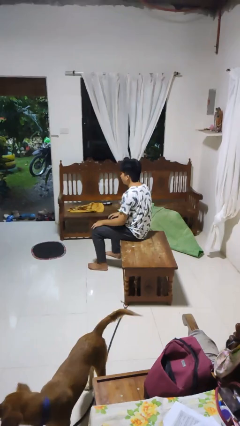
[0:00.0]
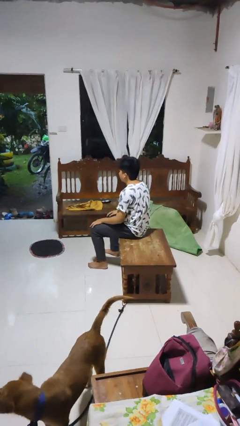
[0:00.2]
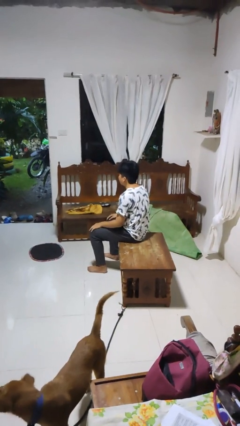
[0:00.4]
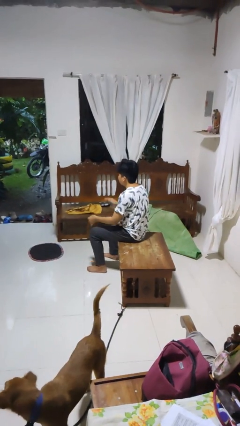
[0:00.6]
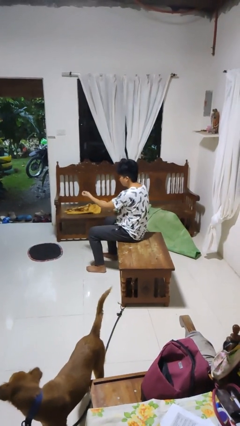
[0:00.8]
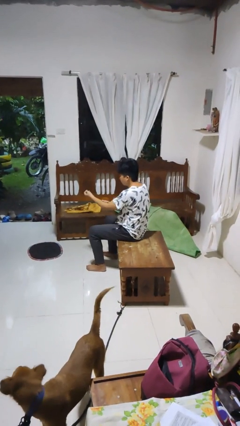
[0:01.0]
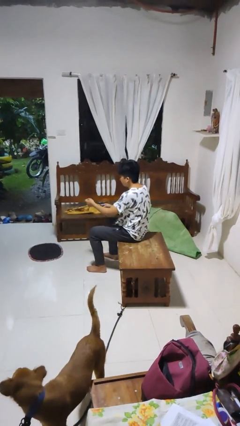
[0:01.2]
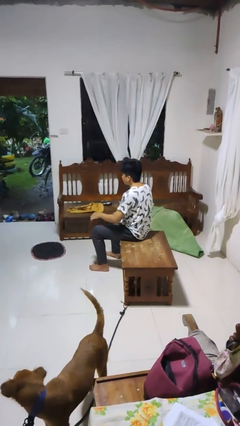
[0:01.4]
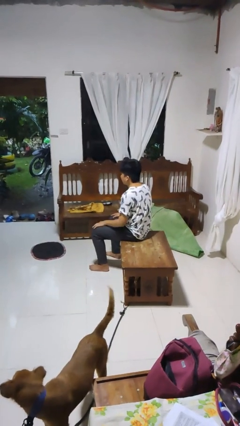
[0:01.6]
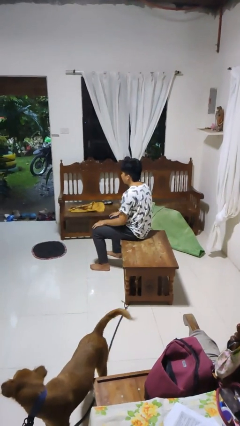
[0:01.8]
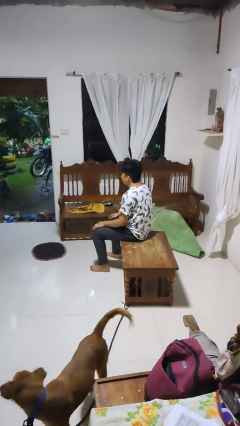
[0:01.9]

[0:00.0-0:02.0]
person swats bug

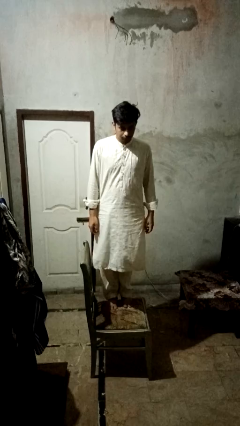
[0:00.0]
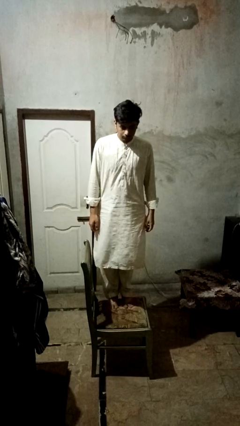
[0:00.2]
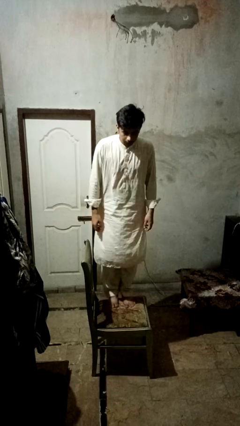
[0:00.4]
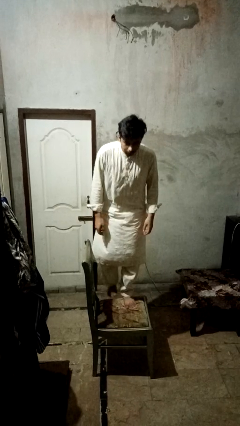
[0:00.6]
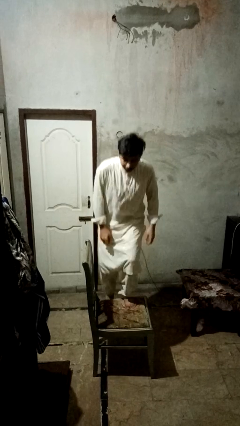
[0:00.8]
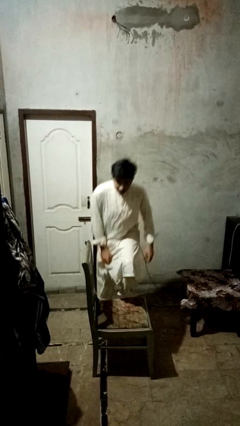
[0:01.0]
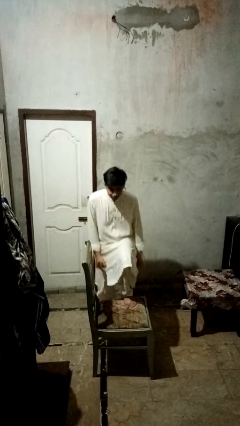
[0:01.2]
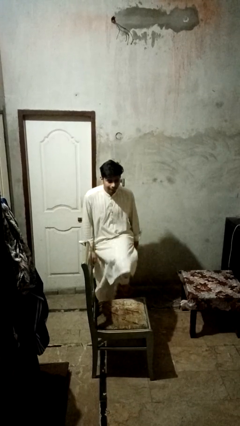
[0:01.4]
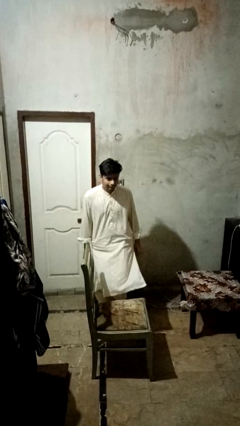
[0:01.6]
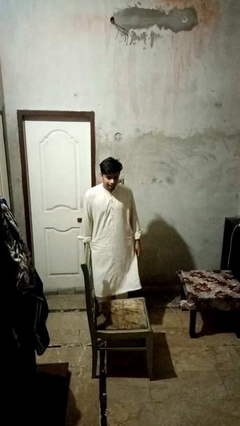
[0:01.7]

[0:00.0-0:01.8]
person climbs off chair

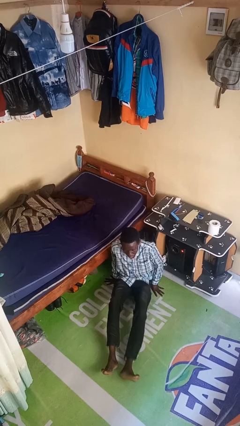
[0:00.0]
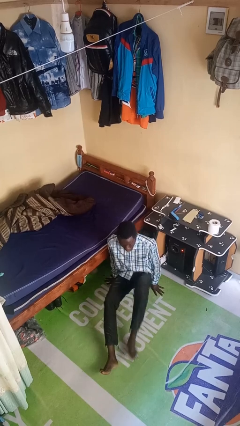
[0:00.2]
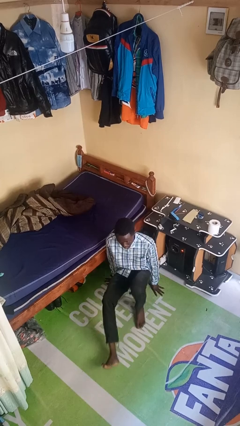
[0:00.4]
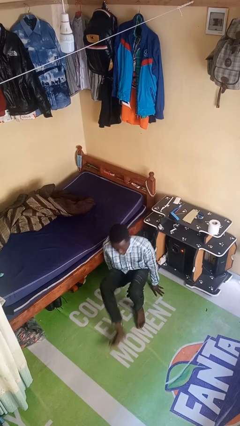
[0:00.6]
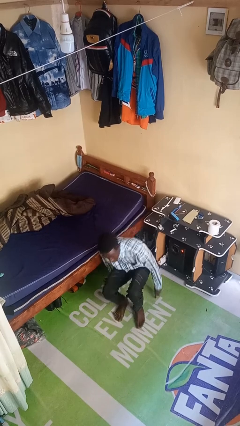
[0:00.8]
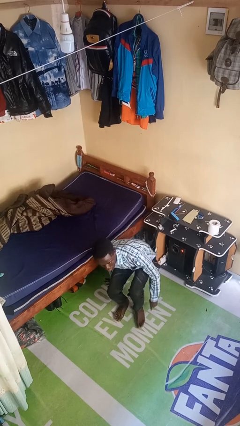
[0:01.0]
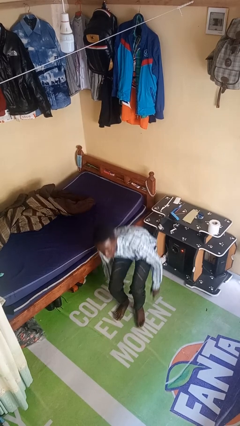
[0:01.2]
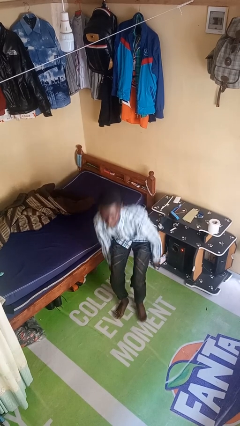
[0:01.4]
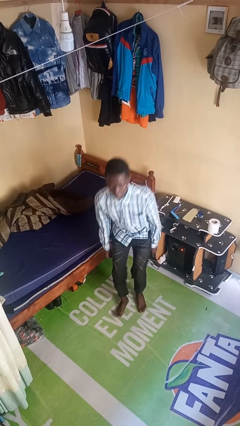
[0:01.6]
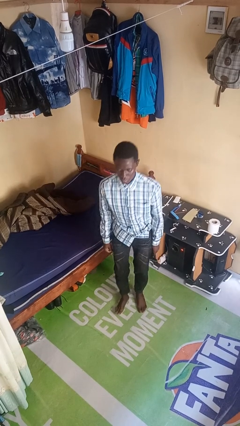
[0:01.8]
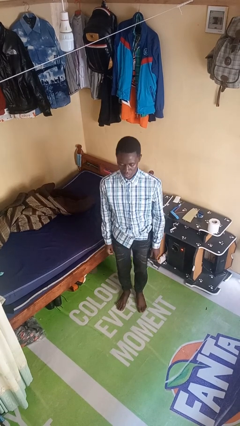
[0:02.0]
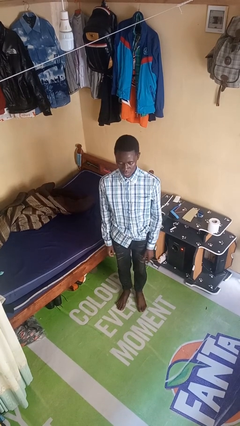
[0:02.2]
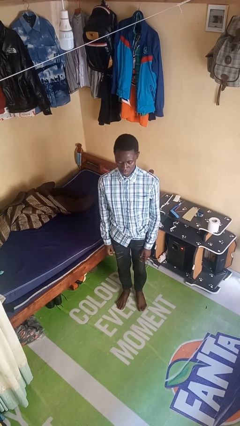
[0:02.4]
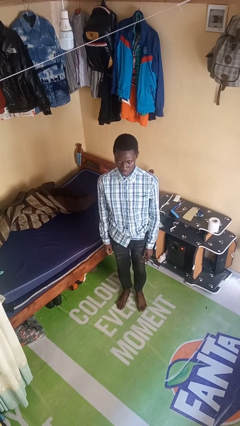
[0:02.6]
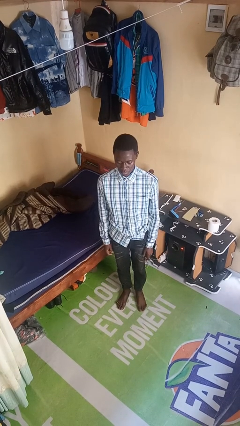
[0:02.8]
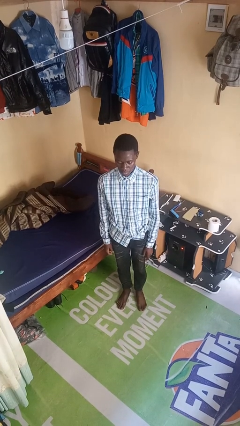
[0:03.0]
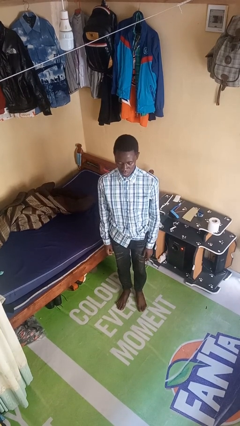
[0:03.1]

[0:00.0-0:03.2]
person stands up from floor

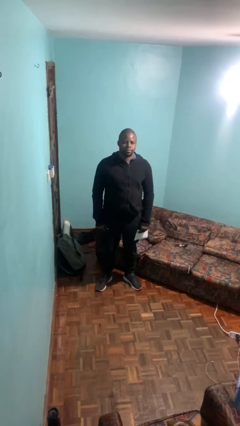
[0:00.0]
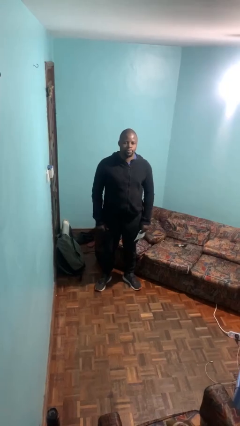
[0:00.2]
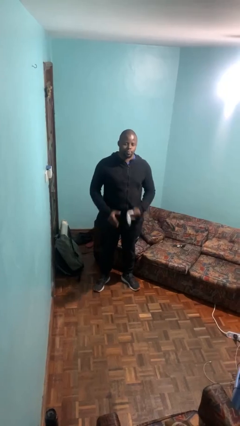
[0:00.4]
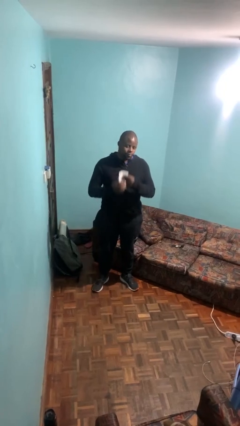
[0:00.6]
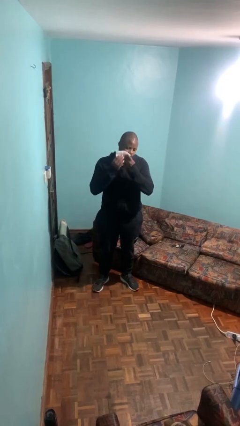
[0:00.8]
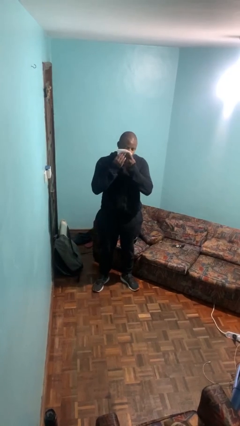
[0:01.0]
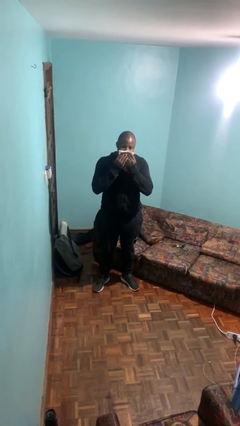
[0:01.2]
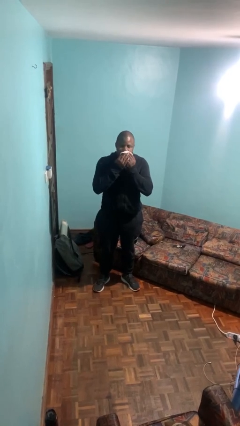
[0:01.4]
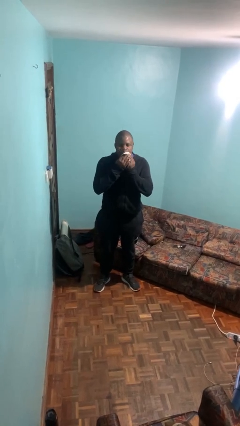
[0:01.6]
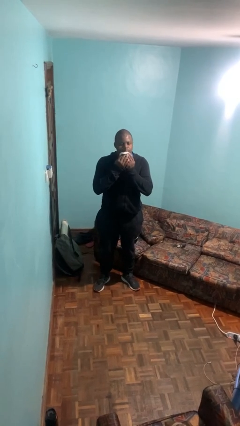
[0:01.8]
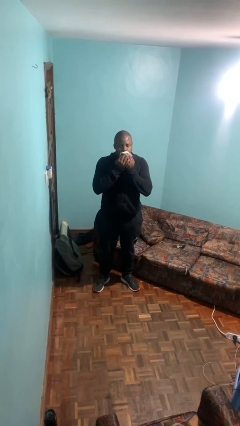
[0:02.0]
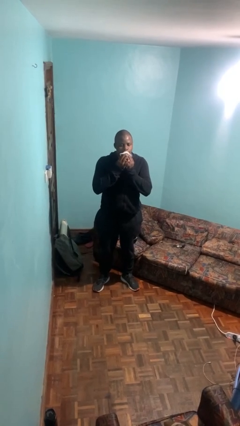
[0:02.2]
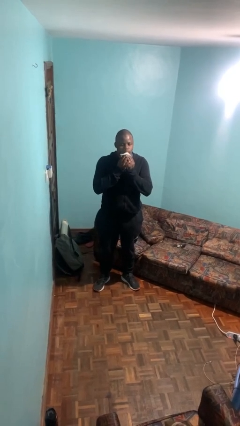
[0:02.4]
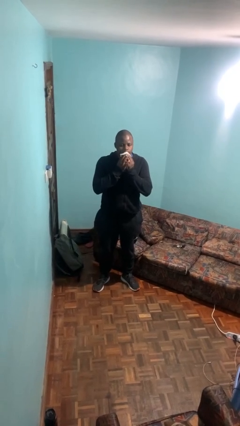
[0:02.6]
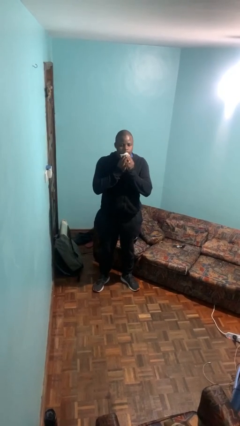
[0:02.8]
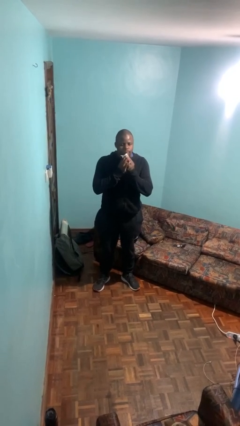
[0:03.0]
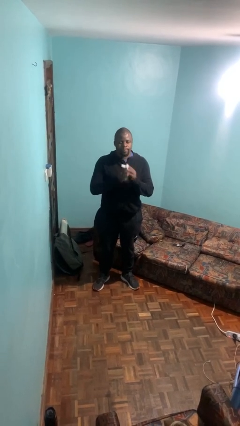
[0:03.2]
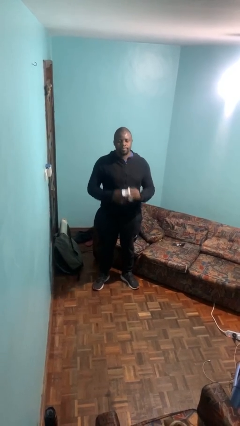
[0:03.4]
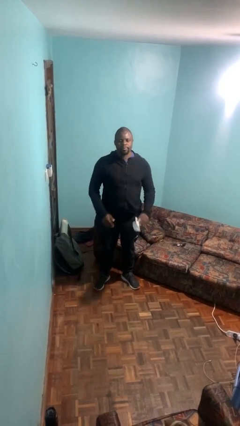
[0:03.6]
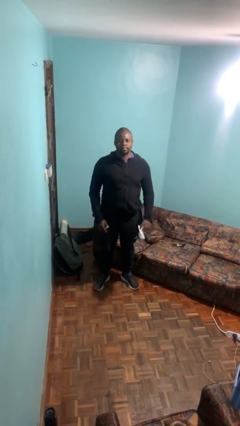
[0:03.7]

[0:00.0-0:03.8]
person wipes mouth with napkin

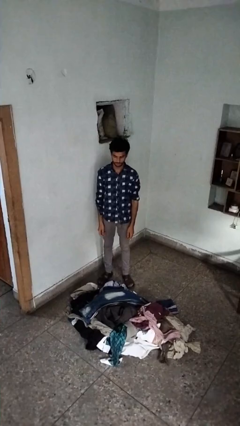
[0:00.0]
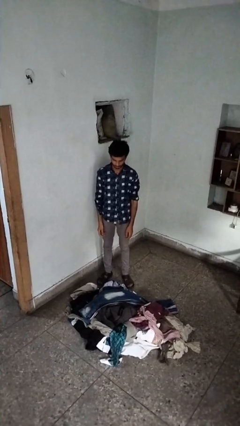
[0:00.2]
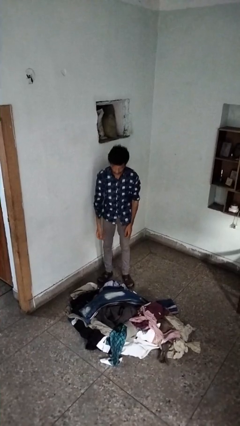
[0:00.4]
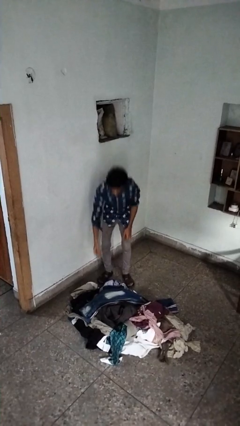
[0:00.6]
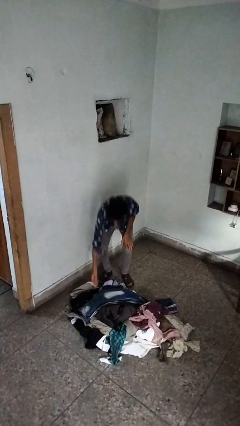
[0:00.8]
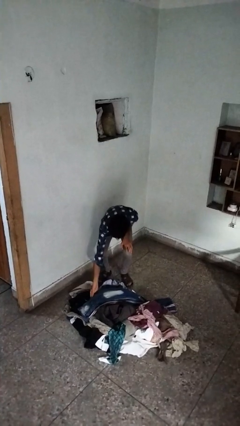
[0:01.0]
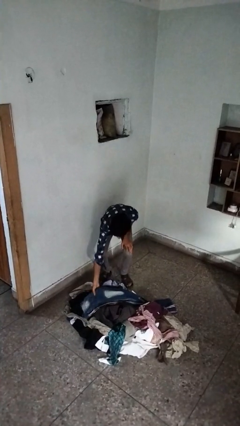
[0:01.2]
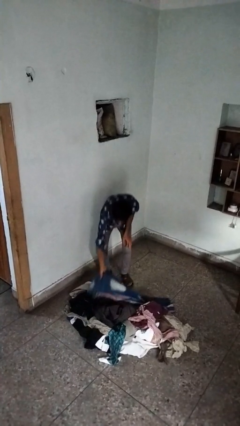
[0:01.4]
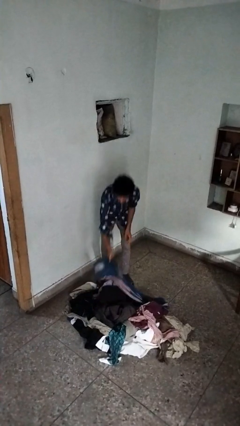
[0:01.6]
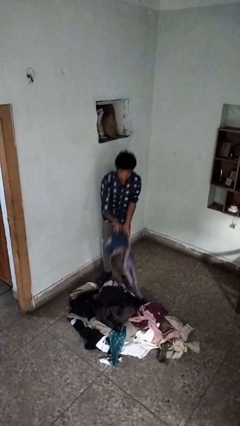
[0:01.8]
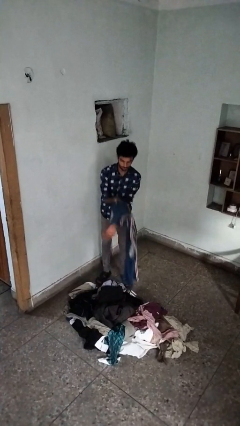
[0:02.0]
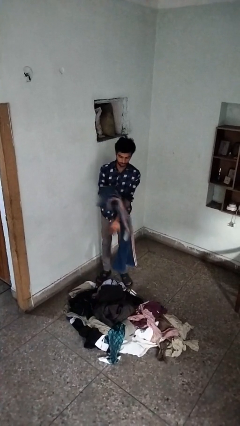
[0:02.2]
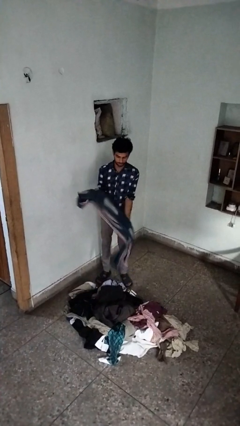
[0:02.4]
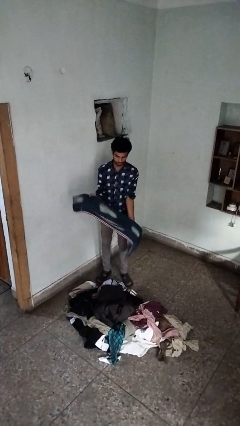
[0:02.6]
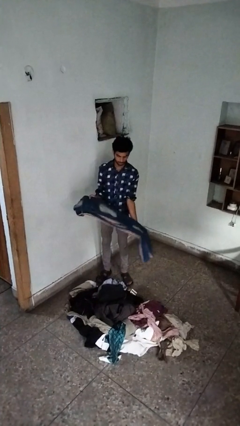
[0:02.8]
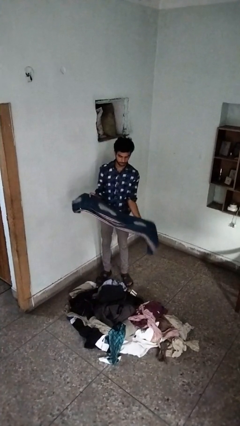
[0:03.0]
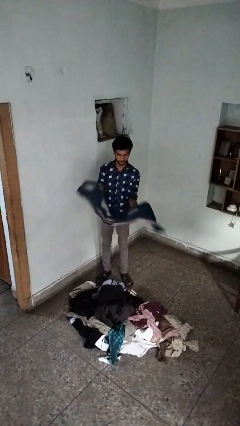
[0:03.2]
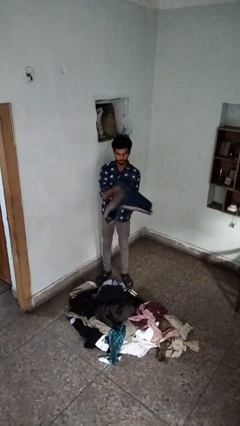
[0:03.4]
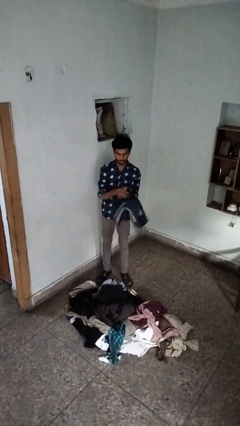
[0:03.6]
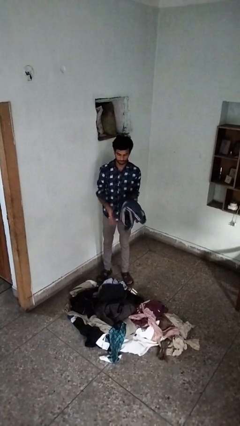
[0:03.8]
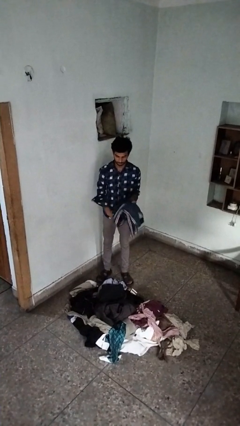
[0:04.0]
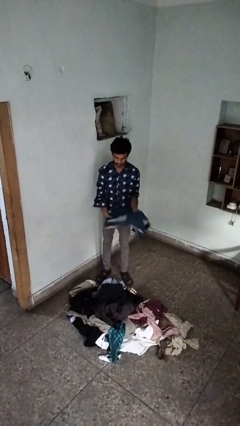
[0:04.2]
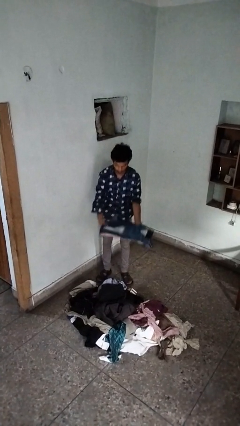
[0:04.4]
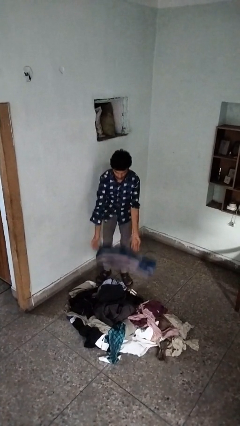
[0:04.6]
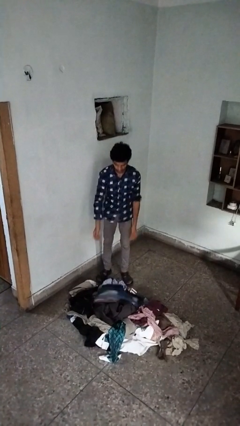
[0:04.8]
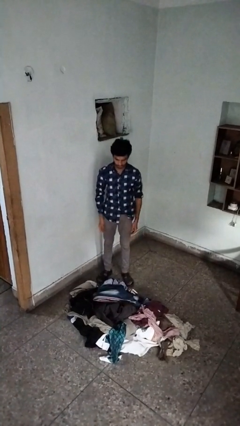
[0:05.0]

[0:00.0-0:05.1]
person folds pants

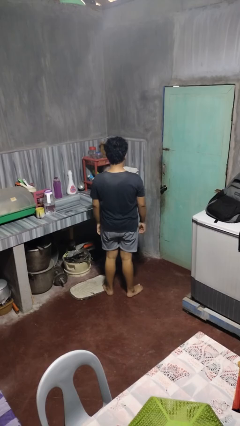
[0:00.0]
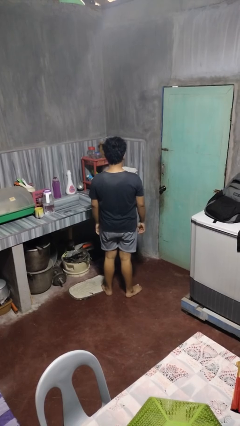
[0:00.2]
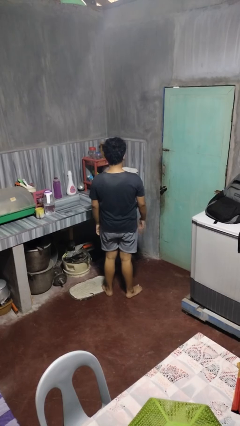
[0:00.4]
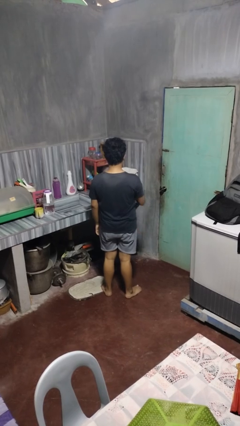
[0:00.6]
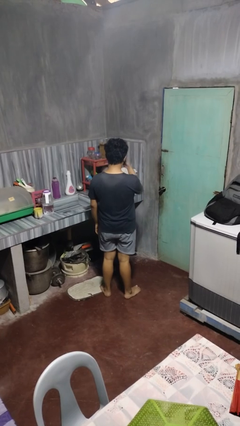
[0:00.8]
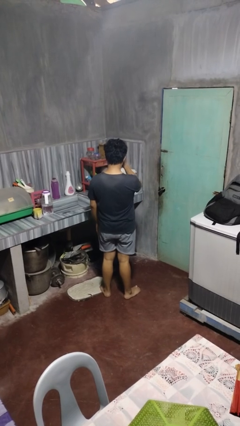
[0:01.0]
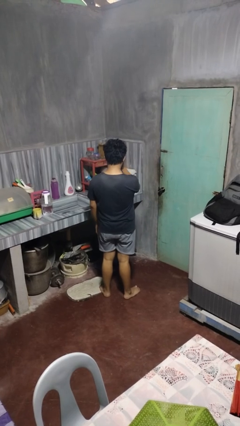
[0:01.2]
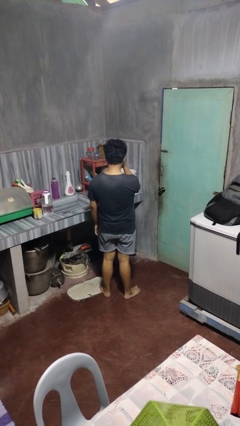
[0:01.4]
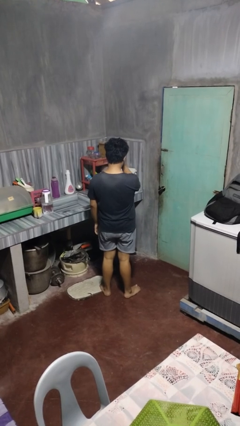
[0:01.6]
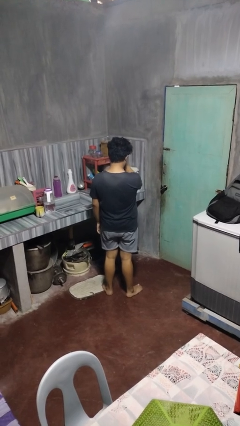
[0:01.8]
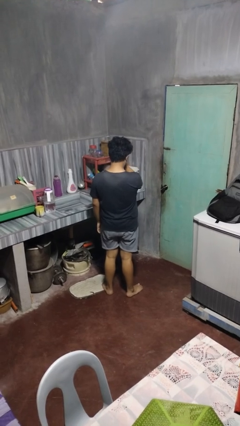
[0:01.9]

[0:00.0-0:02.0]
person rubs eyes

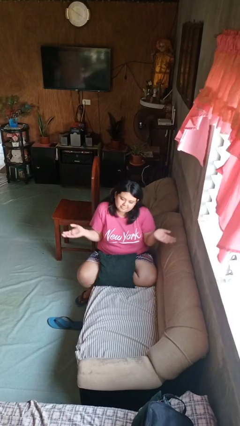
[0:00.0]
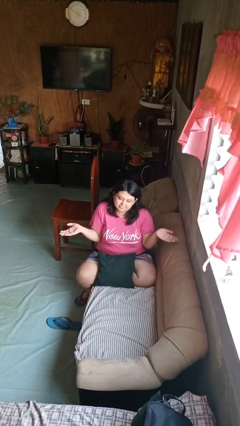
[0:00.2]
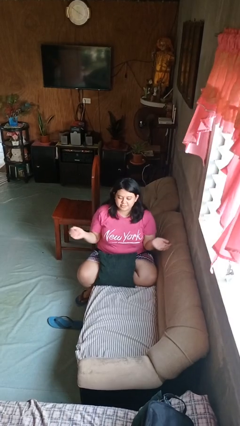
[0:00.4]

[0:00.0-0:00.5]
person shrugs
